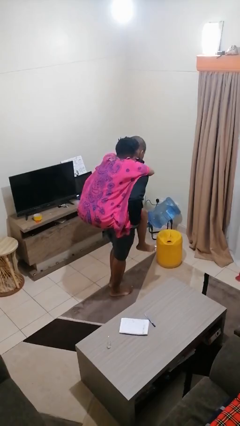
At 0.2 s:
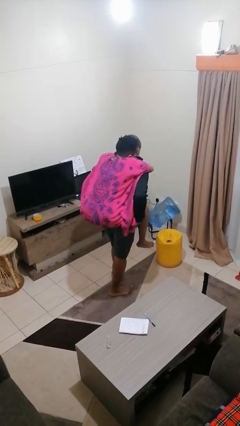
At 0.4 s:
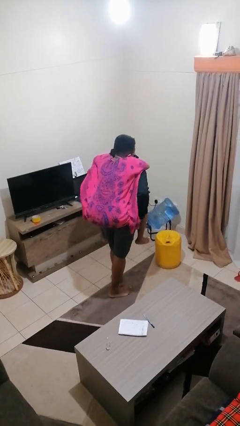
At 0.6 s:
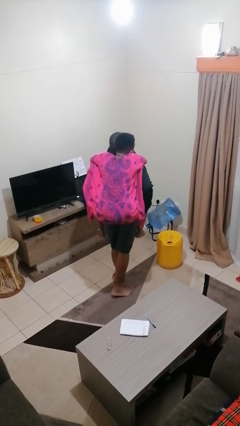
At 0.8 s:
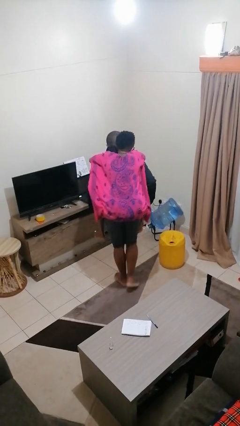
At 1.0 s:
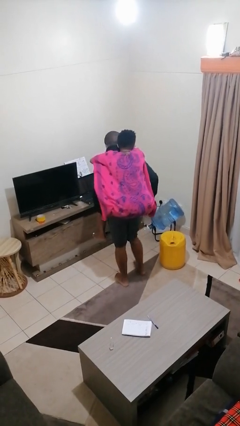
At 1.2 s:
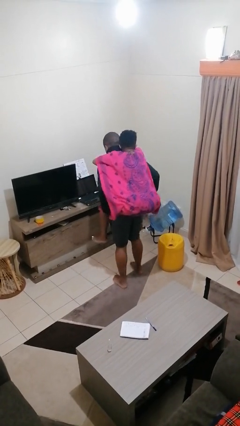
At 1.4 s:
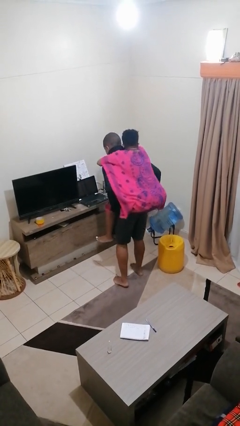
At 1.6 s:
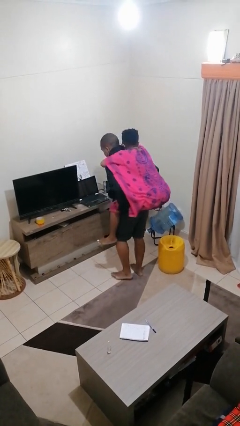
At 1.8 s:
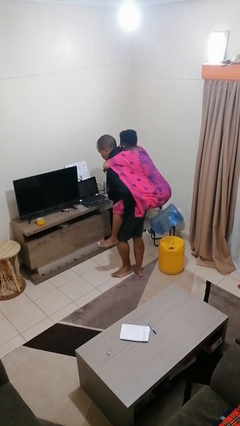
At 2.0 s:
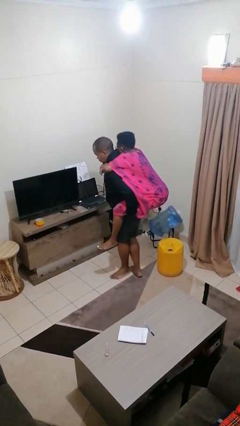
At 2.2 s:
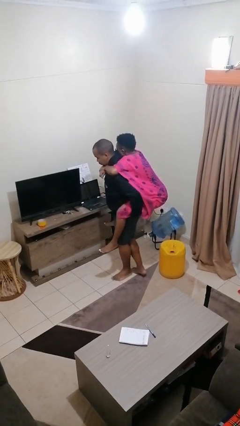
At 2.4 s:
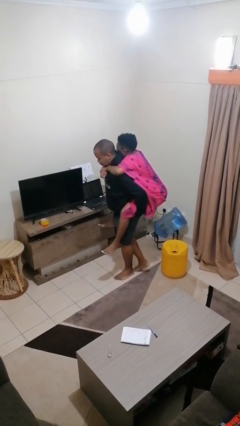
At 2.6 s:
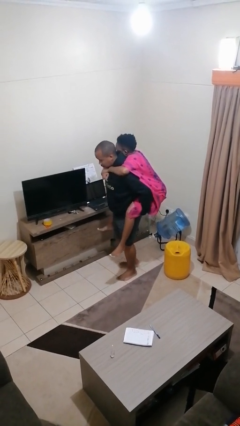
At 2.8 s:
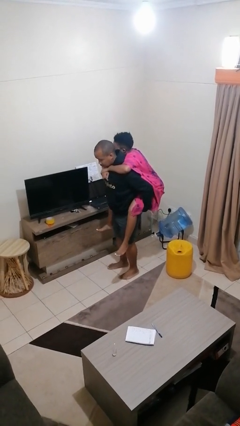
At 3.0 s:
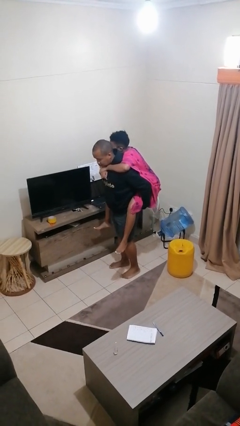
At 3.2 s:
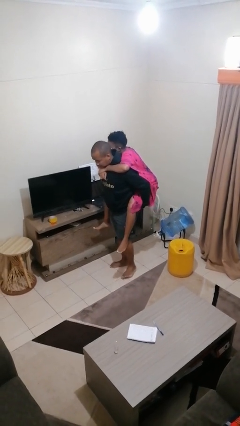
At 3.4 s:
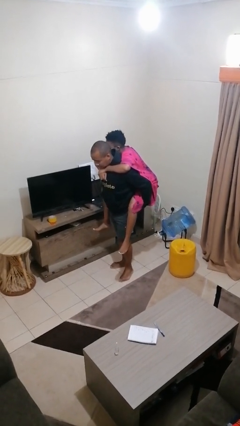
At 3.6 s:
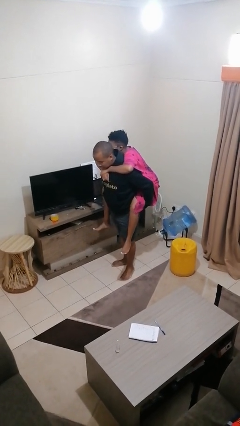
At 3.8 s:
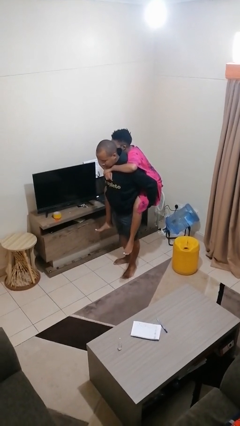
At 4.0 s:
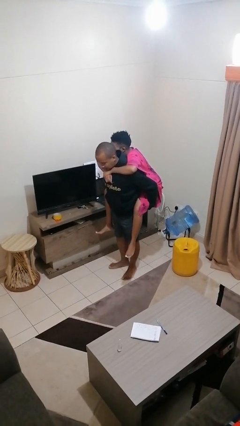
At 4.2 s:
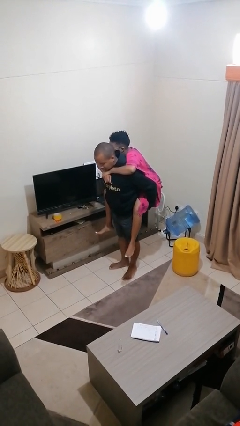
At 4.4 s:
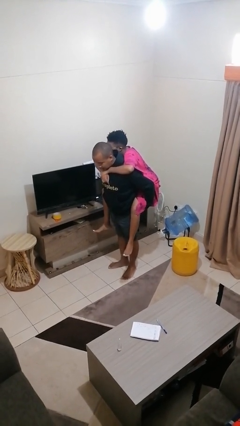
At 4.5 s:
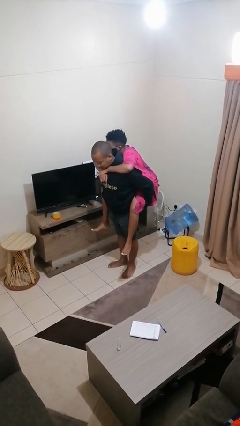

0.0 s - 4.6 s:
person carries person on back

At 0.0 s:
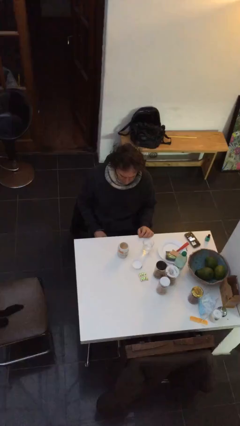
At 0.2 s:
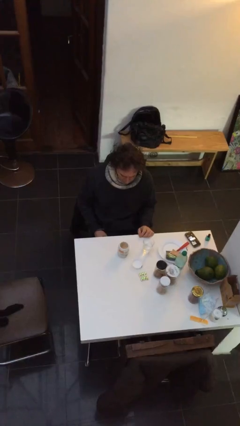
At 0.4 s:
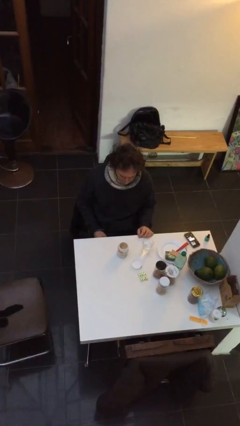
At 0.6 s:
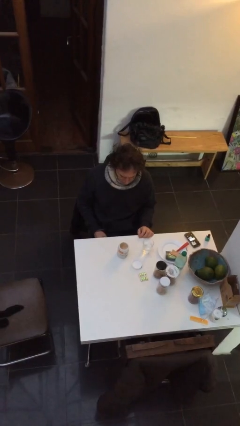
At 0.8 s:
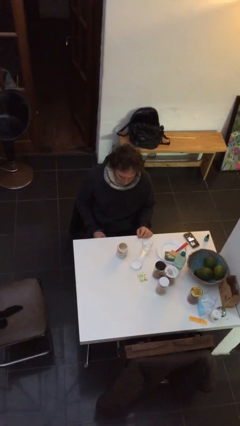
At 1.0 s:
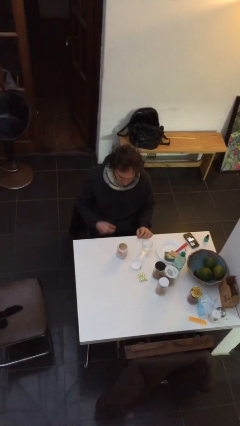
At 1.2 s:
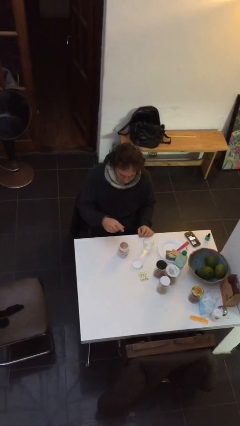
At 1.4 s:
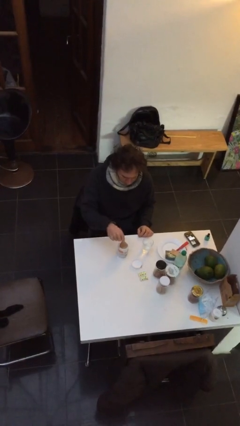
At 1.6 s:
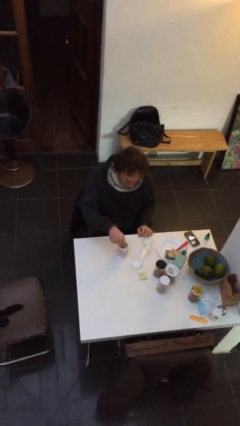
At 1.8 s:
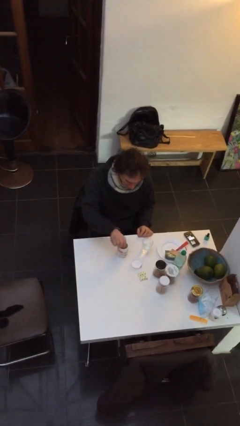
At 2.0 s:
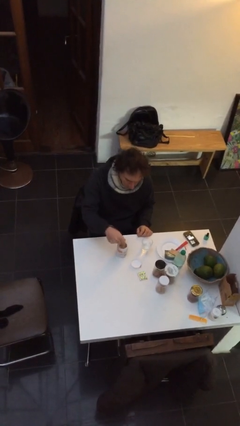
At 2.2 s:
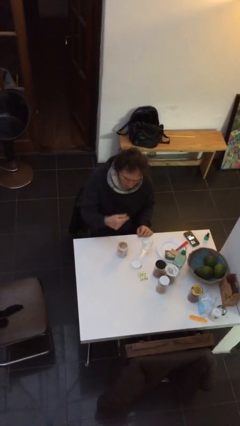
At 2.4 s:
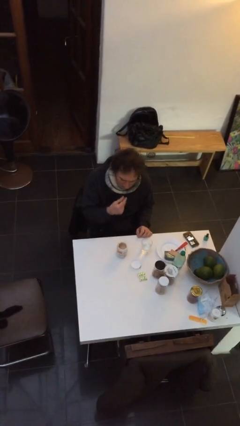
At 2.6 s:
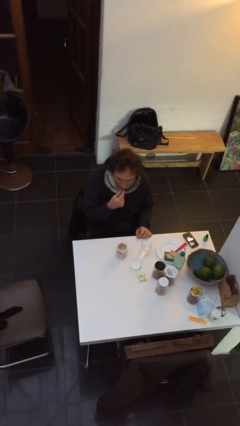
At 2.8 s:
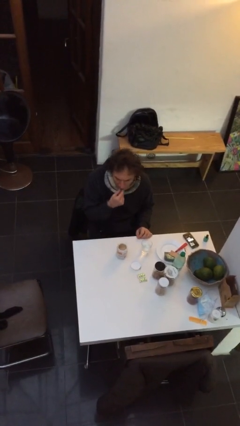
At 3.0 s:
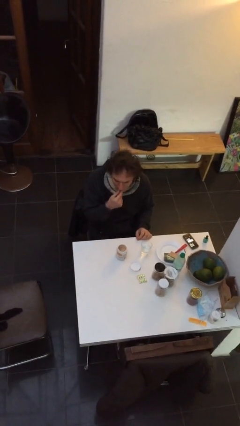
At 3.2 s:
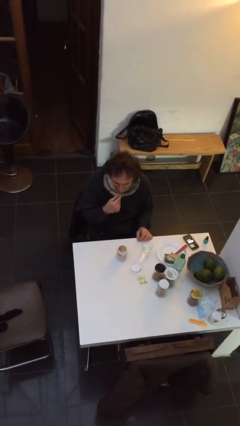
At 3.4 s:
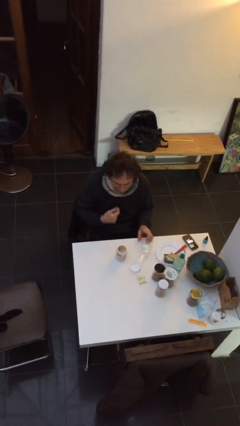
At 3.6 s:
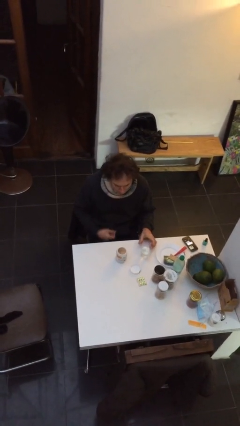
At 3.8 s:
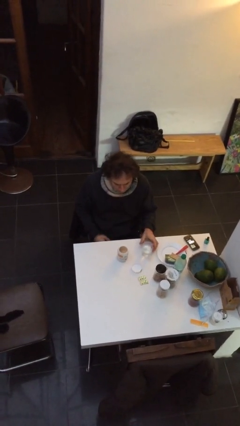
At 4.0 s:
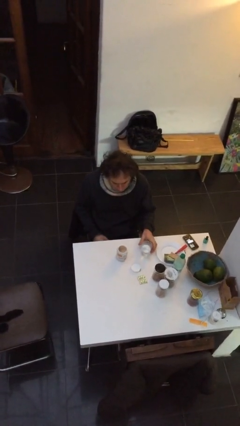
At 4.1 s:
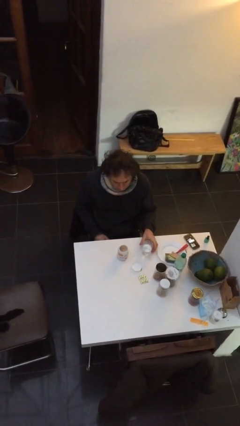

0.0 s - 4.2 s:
person takes medicine pills

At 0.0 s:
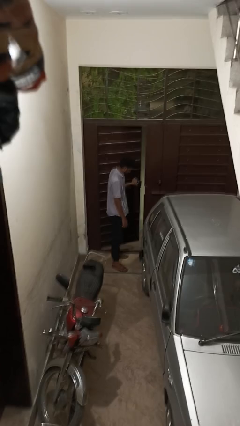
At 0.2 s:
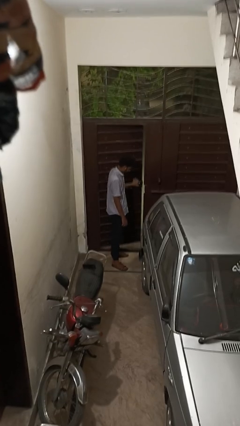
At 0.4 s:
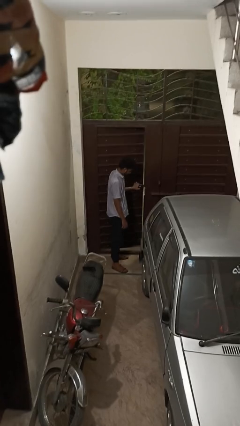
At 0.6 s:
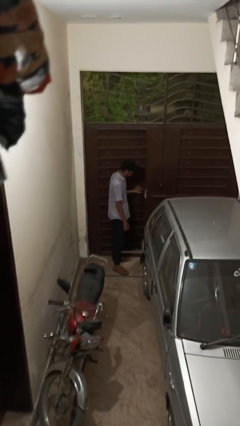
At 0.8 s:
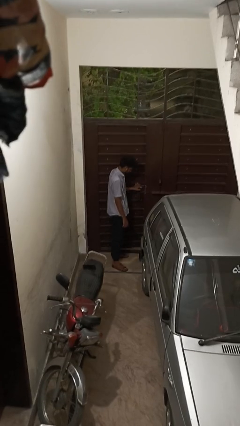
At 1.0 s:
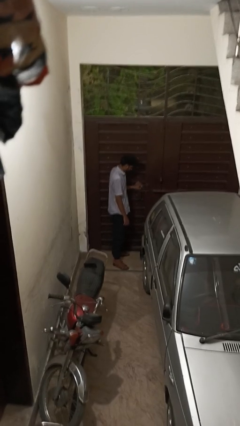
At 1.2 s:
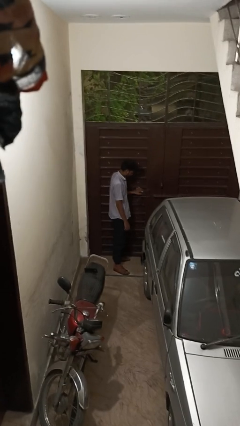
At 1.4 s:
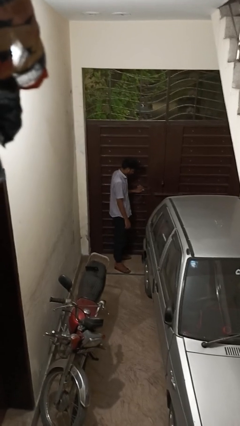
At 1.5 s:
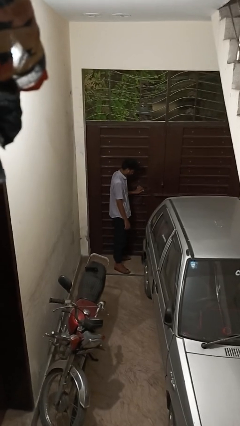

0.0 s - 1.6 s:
person closes gate

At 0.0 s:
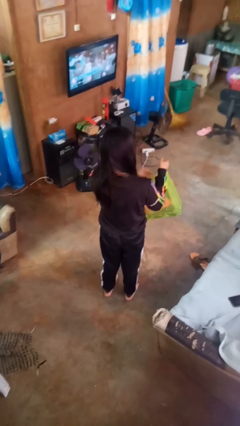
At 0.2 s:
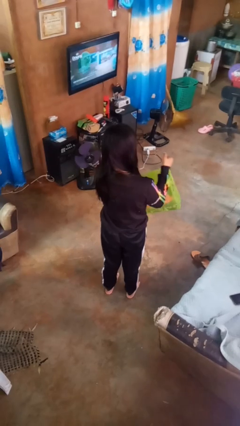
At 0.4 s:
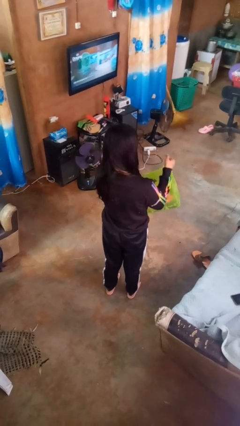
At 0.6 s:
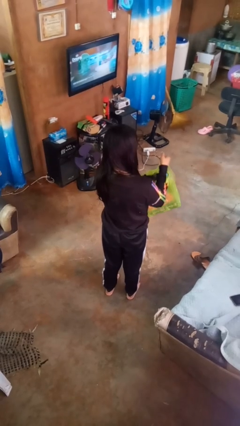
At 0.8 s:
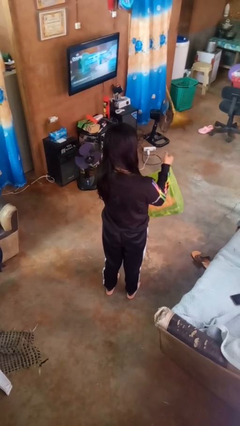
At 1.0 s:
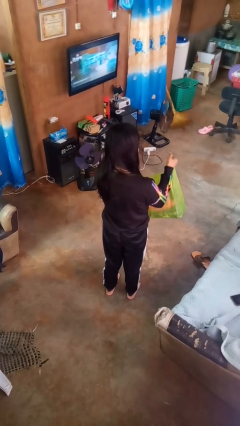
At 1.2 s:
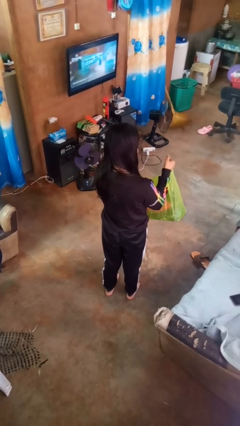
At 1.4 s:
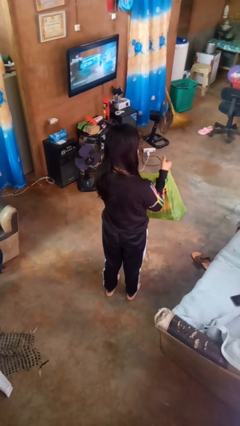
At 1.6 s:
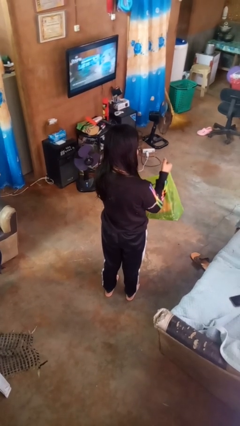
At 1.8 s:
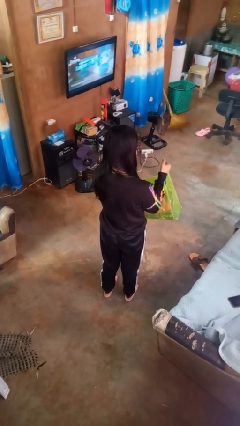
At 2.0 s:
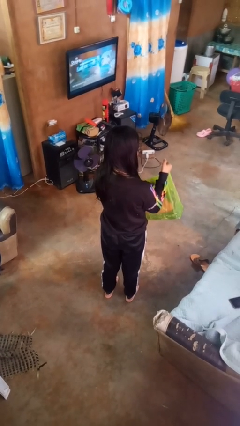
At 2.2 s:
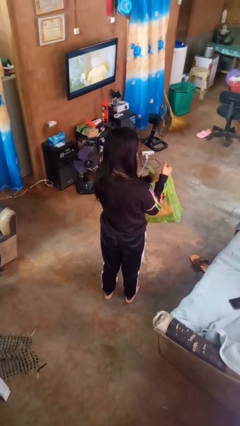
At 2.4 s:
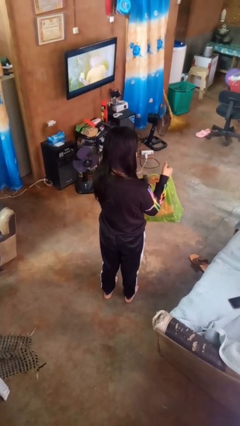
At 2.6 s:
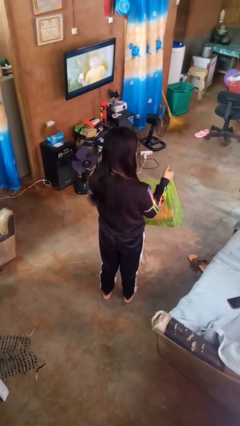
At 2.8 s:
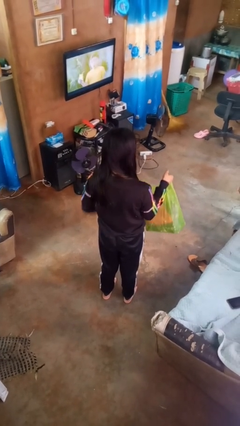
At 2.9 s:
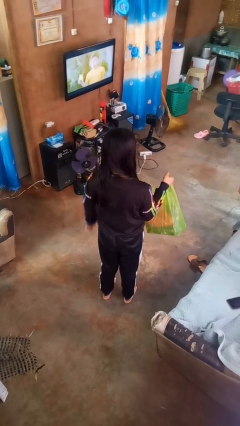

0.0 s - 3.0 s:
person searches in bag

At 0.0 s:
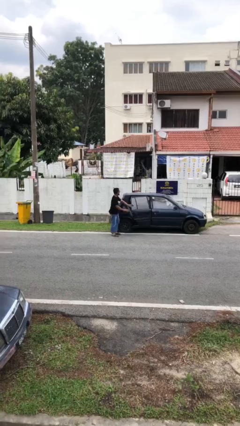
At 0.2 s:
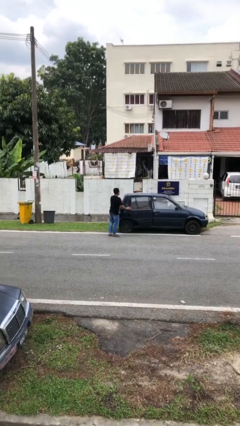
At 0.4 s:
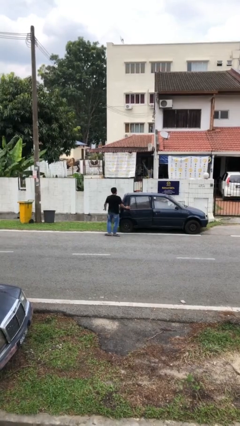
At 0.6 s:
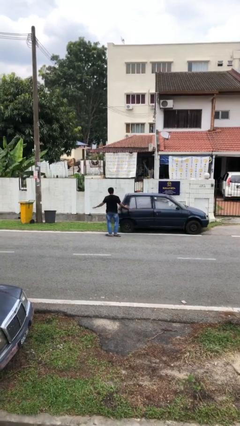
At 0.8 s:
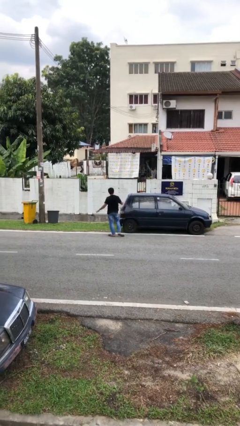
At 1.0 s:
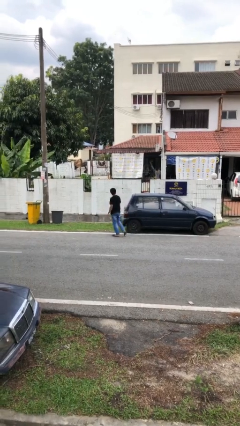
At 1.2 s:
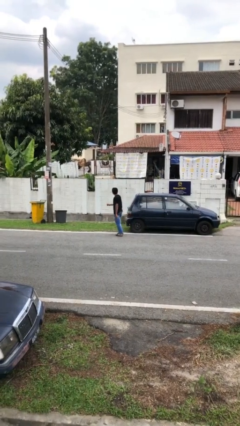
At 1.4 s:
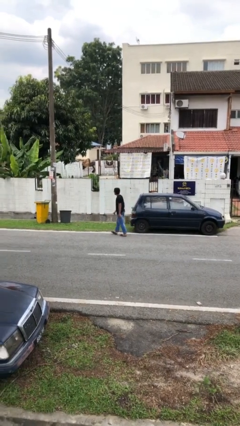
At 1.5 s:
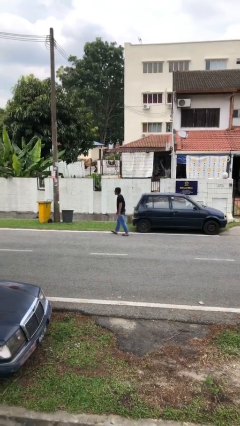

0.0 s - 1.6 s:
person closes car door

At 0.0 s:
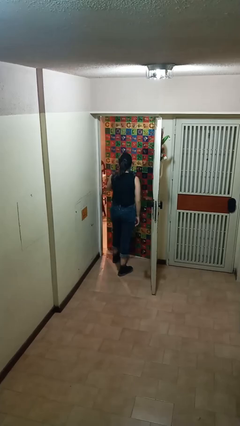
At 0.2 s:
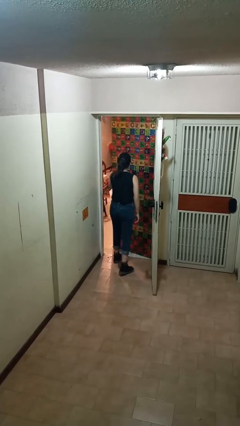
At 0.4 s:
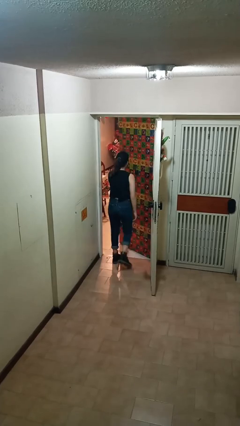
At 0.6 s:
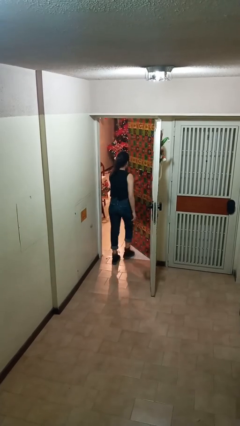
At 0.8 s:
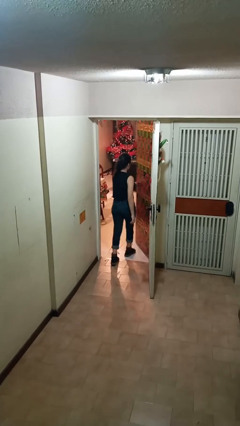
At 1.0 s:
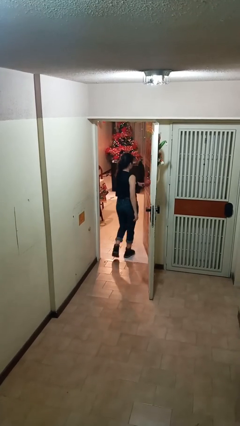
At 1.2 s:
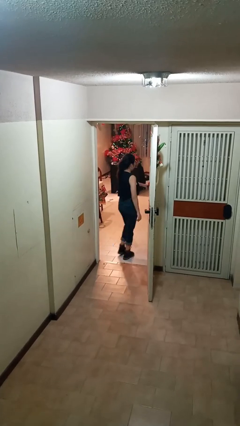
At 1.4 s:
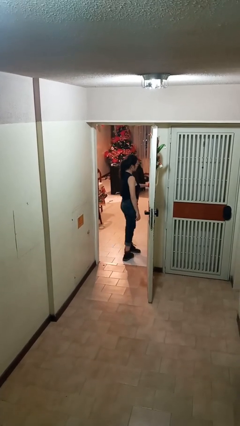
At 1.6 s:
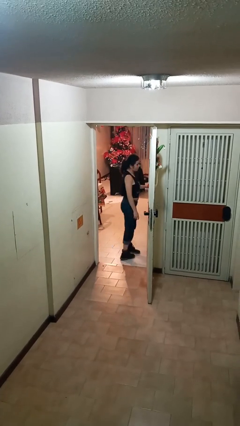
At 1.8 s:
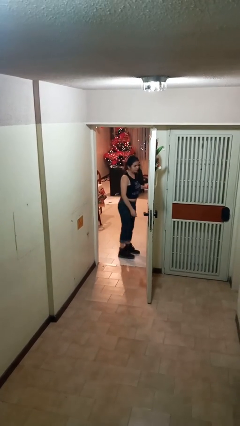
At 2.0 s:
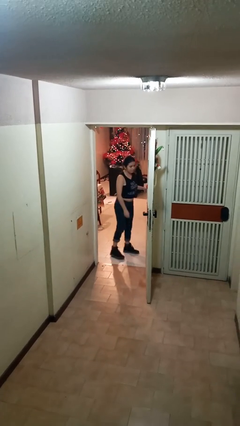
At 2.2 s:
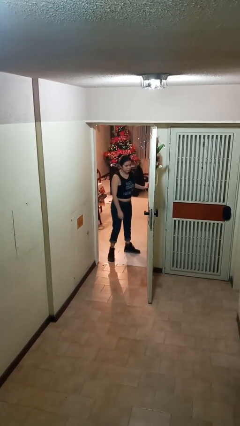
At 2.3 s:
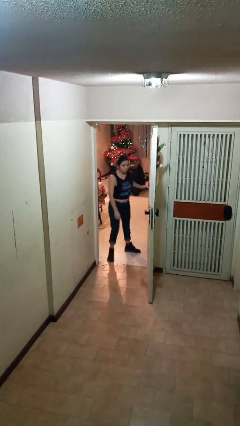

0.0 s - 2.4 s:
person opens facility door

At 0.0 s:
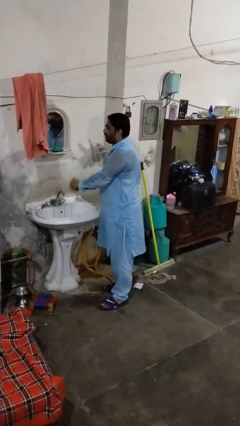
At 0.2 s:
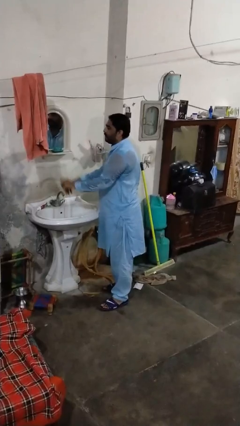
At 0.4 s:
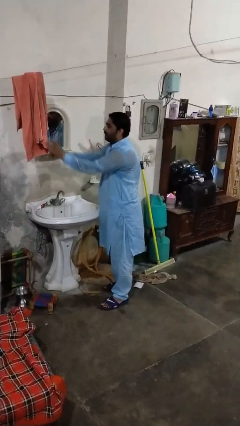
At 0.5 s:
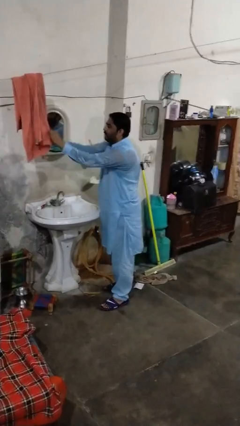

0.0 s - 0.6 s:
person washes hands
